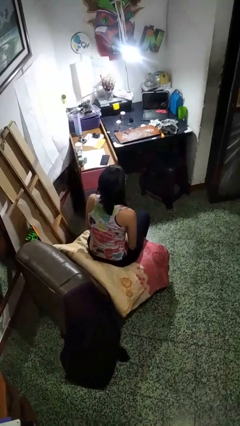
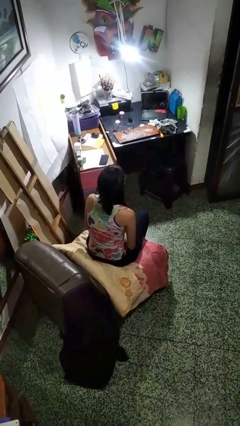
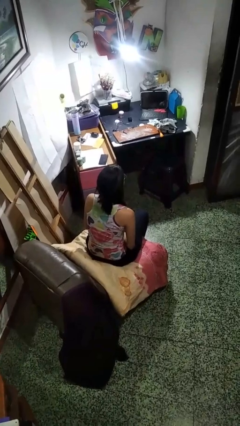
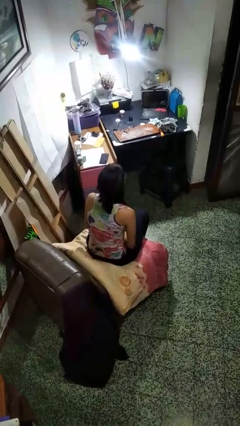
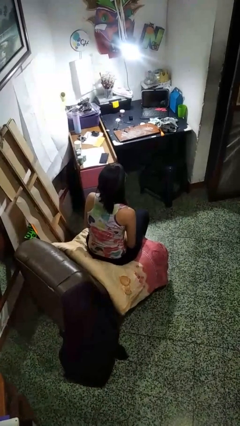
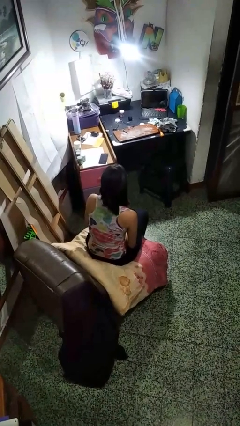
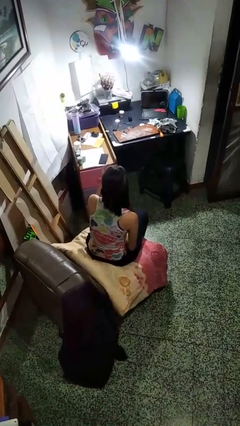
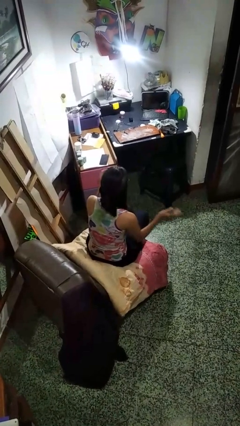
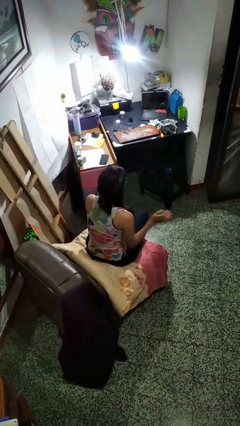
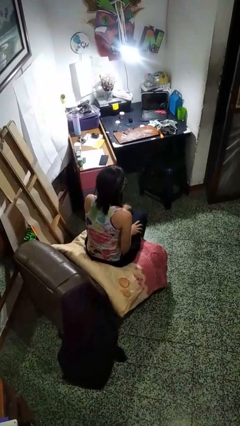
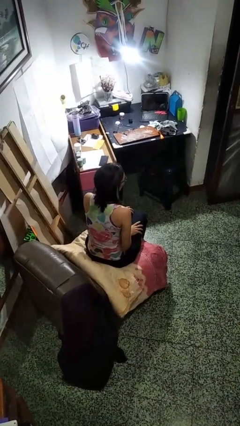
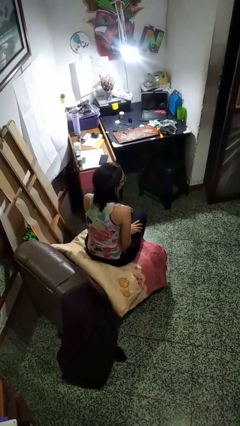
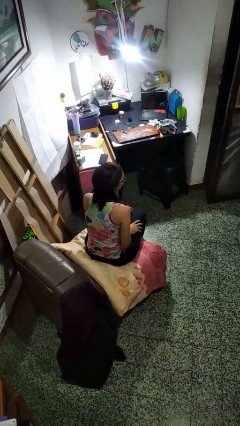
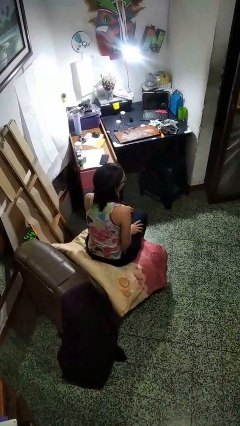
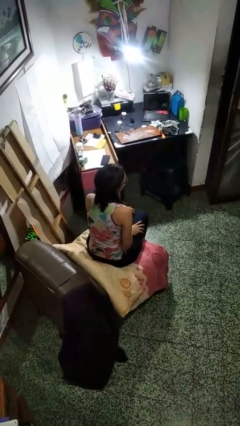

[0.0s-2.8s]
person slaps hands on thighs

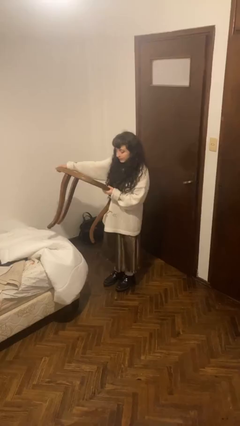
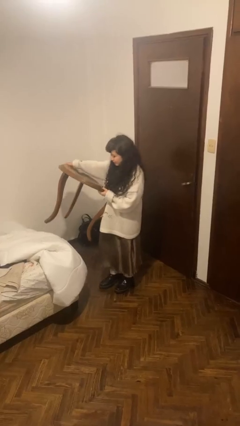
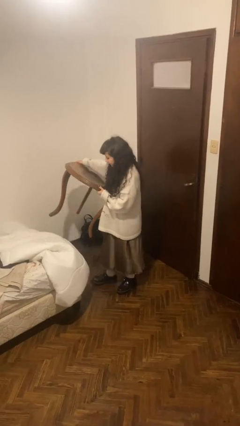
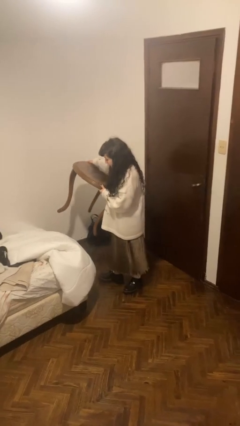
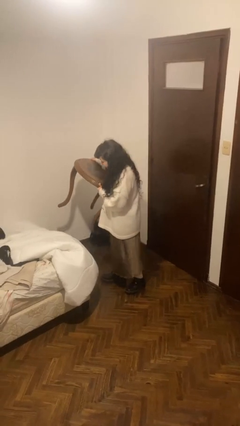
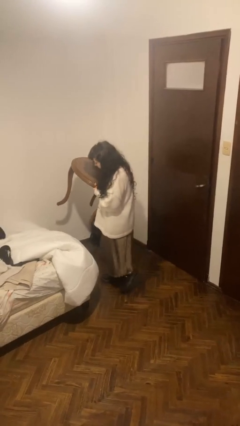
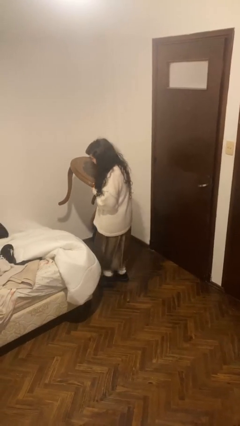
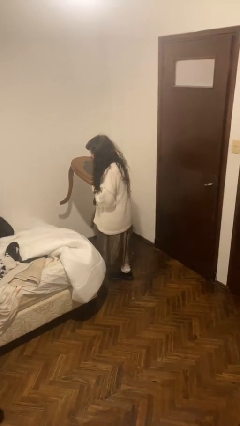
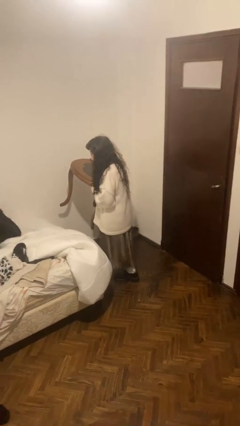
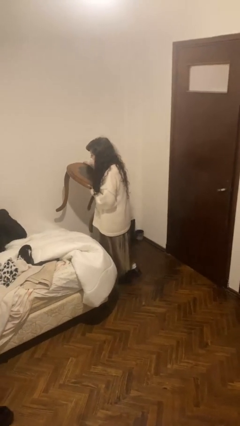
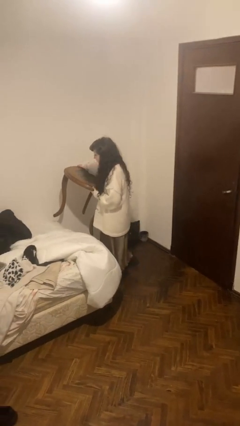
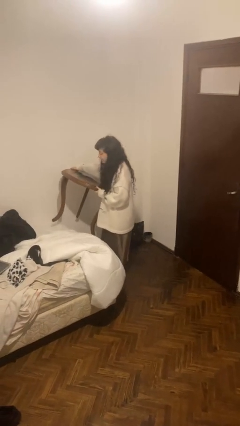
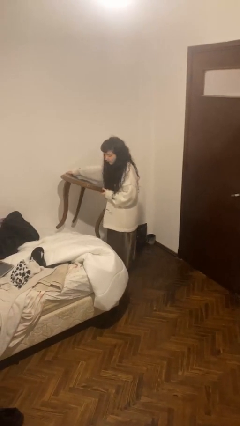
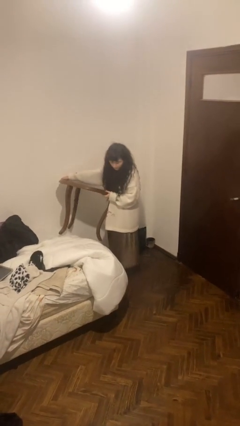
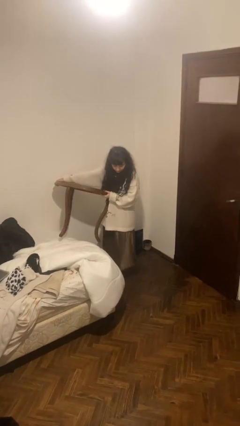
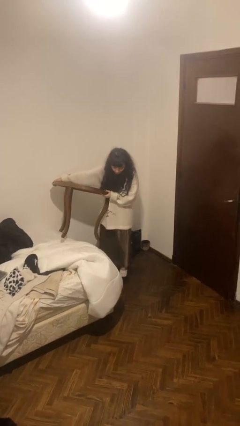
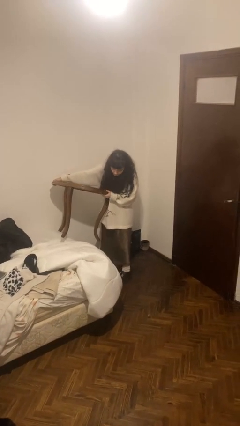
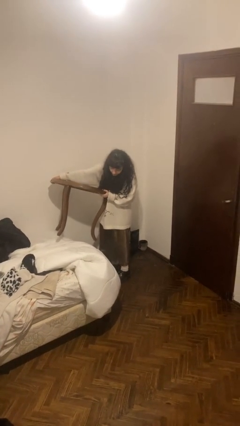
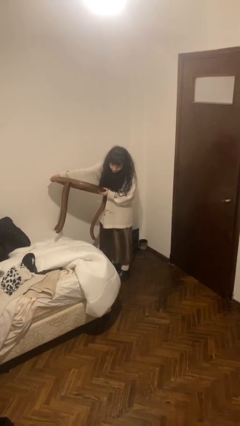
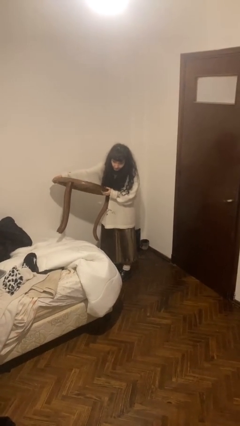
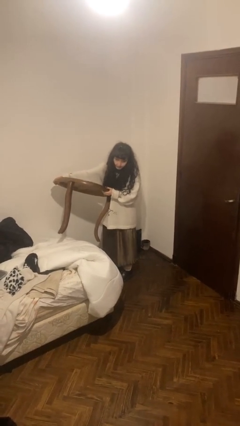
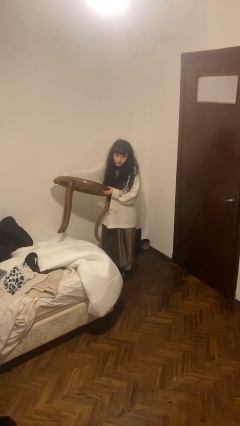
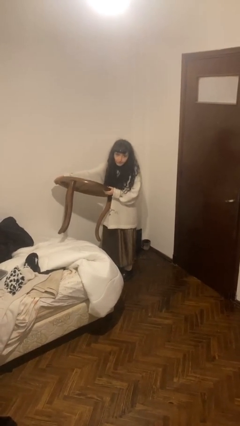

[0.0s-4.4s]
person carries furniture

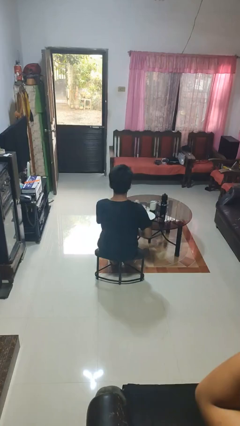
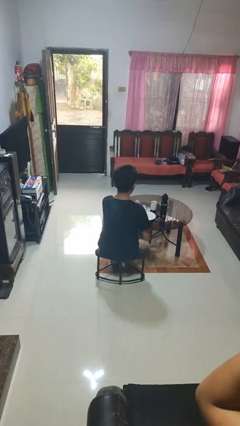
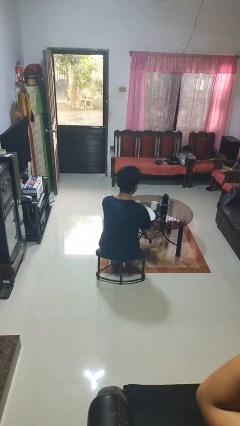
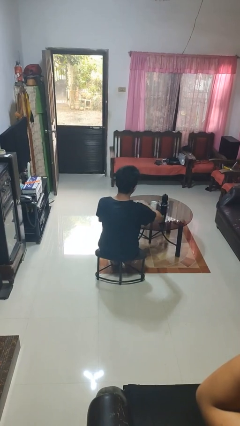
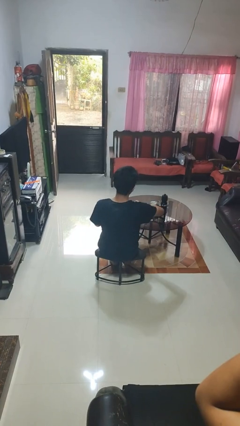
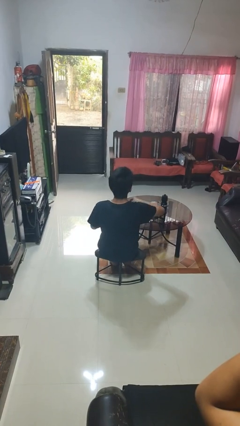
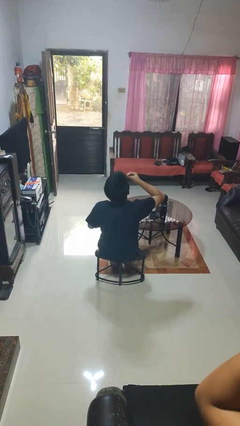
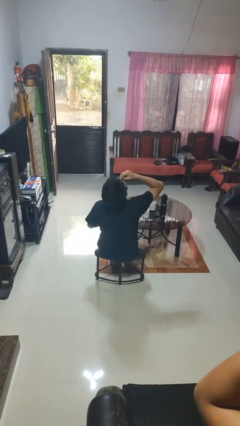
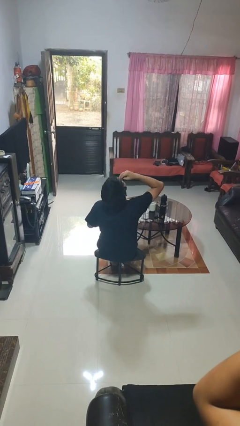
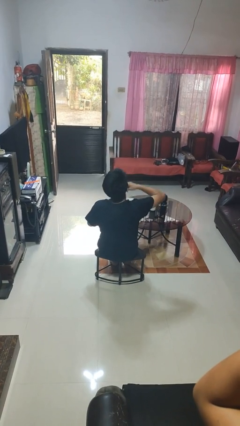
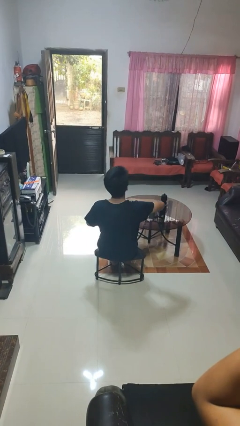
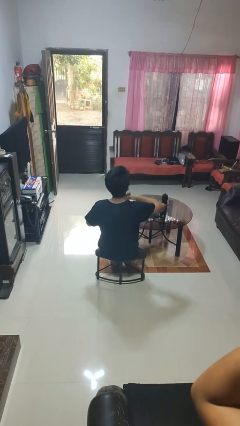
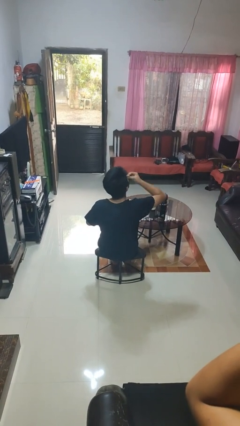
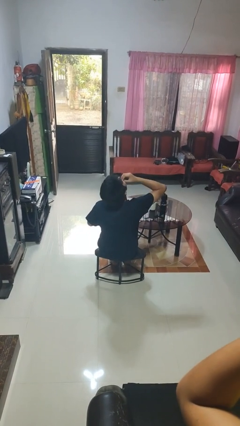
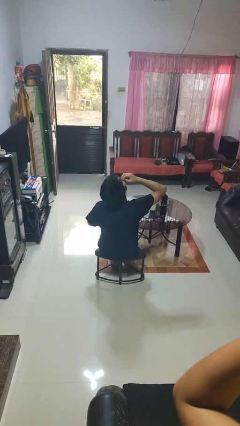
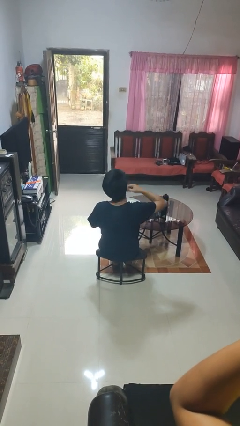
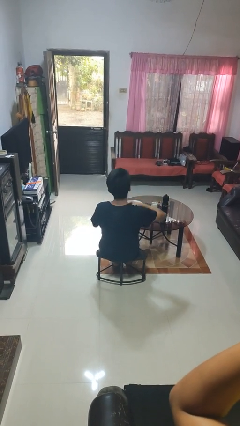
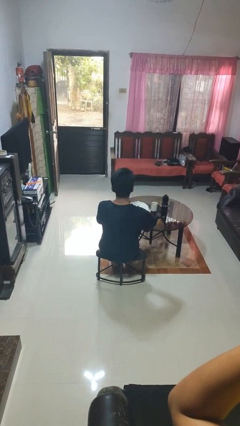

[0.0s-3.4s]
person eats with hands

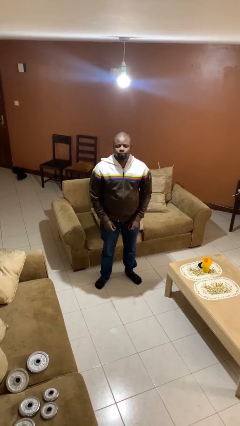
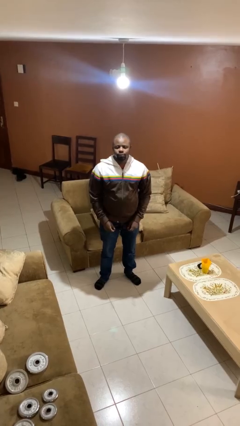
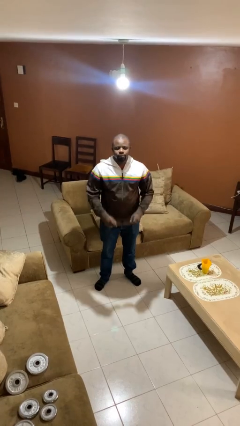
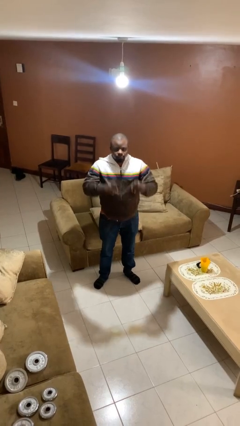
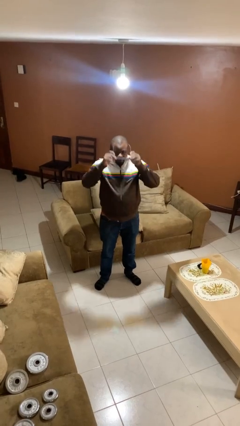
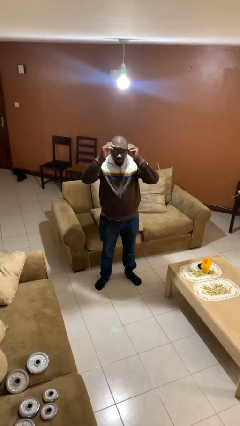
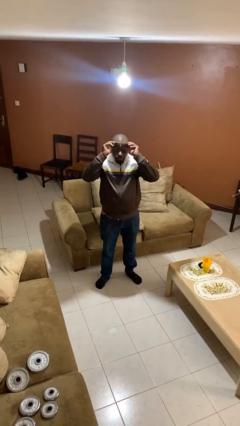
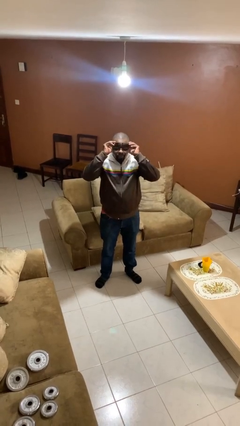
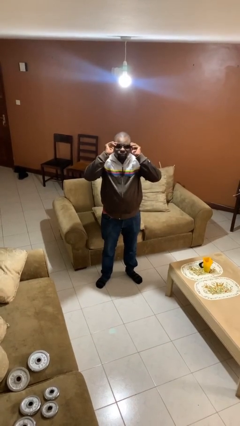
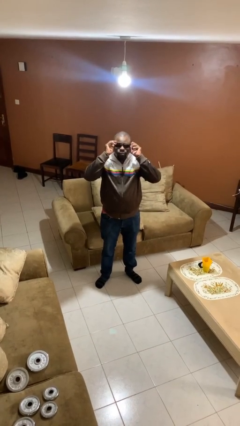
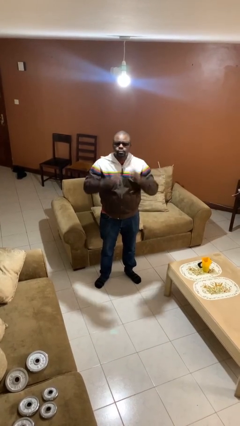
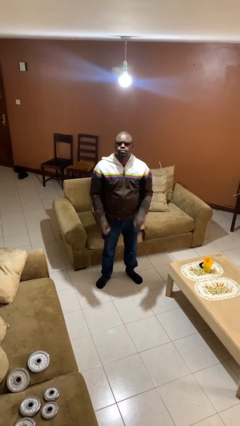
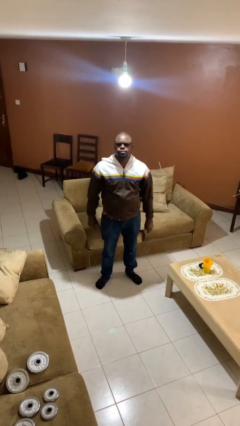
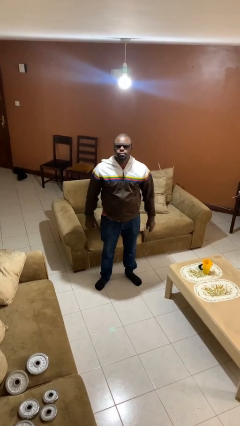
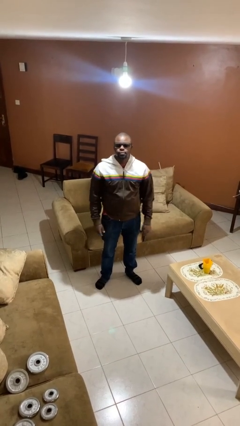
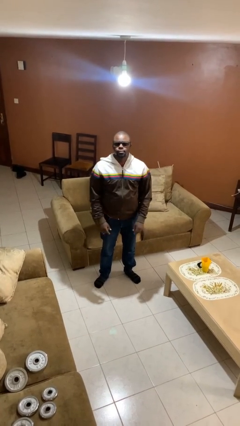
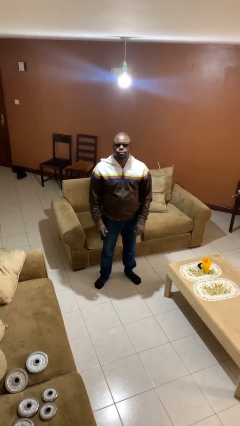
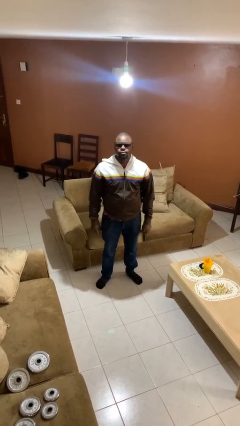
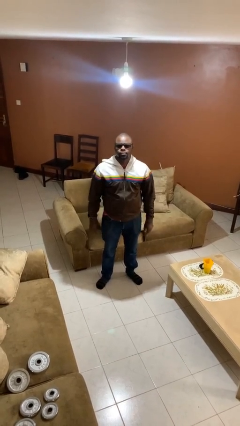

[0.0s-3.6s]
person puts on sunglasses

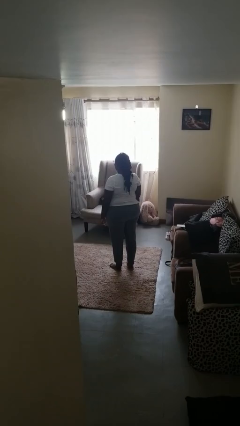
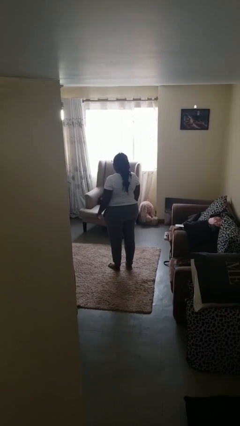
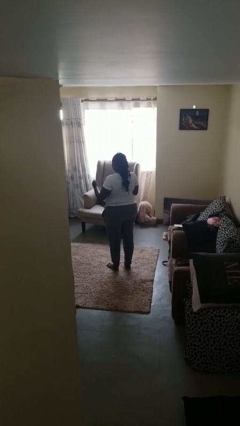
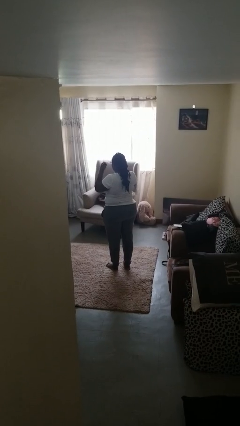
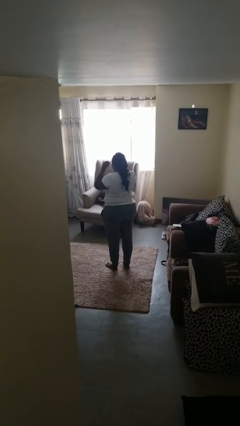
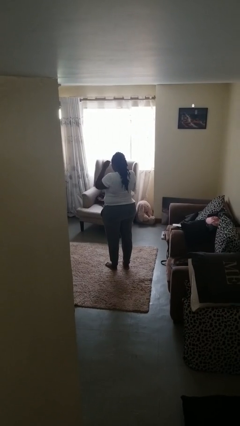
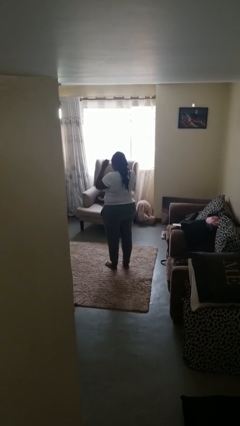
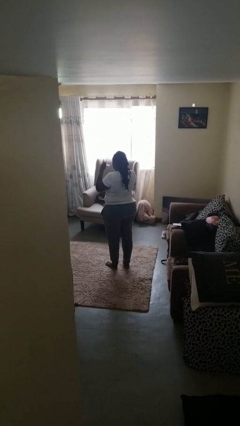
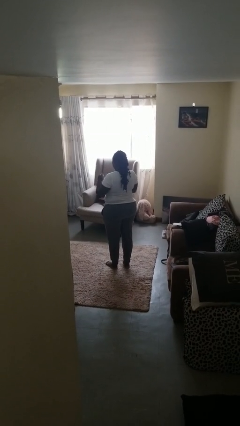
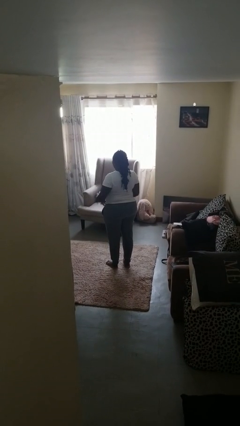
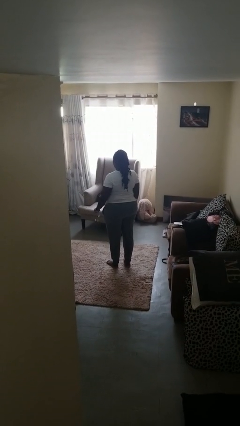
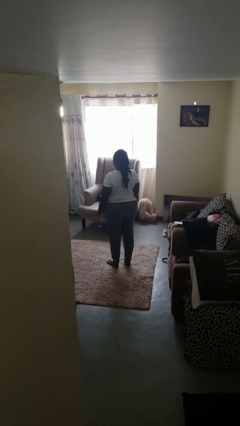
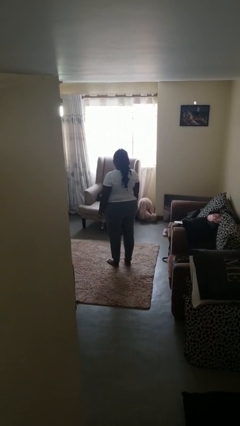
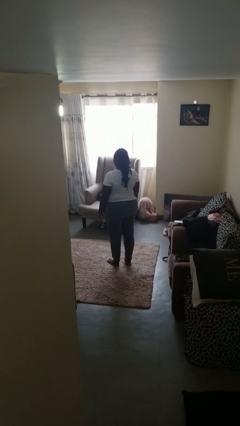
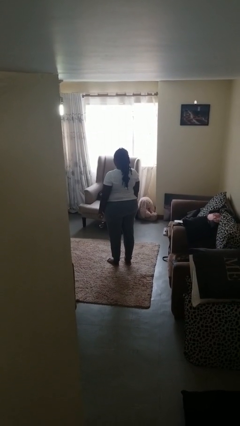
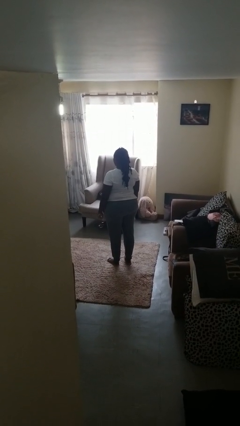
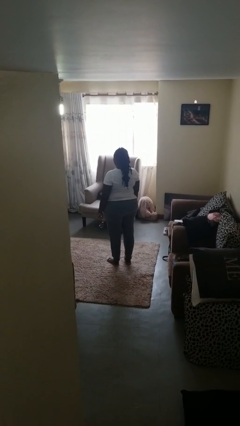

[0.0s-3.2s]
person takes off glasses
